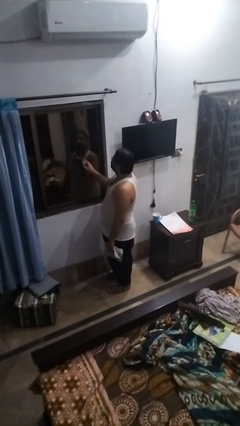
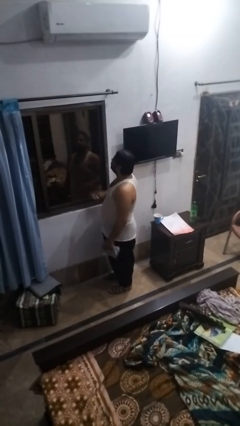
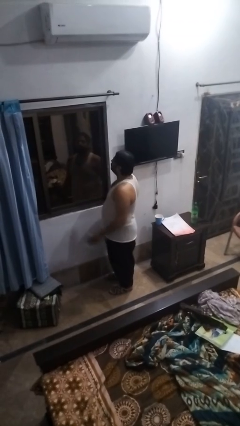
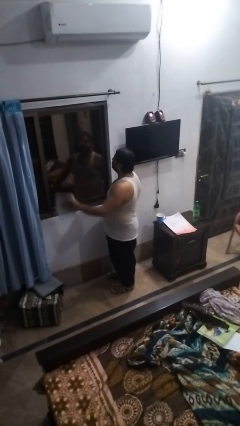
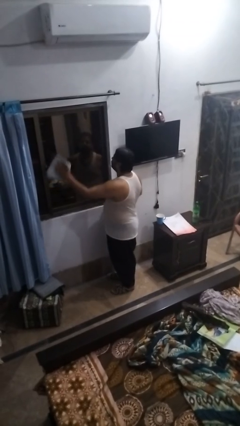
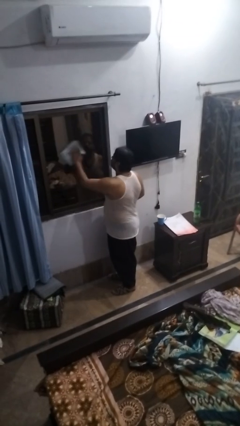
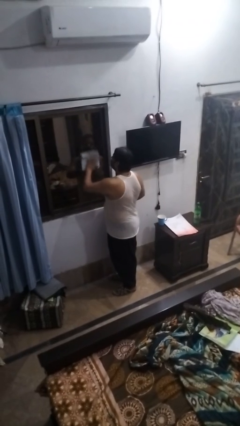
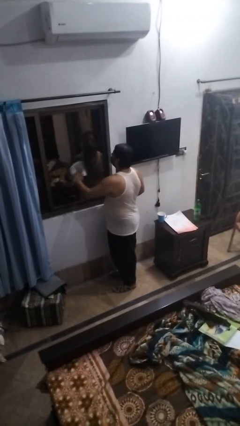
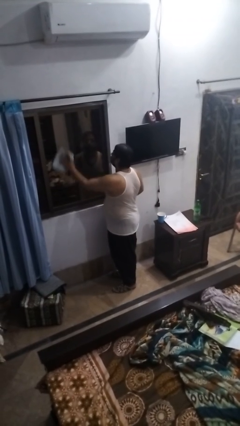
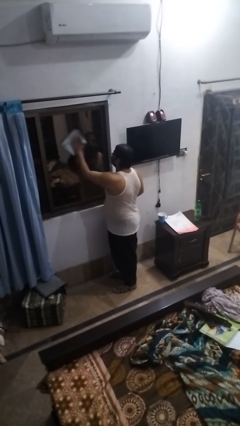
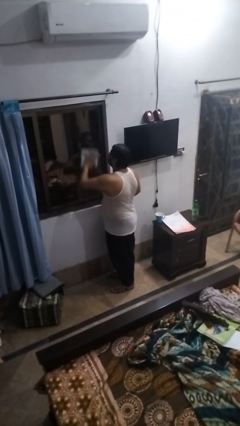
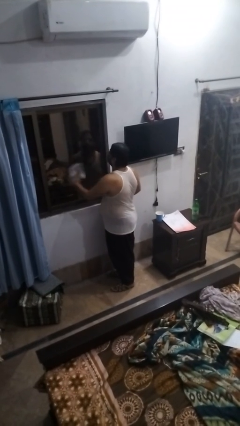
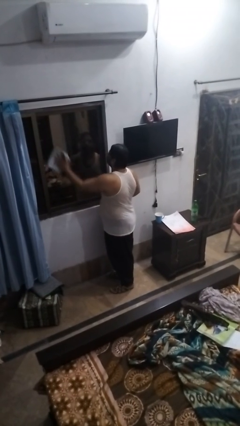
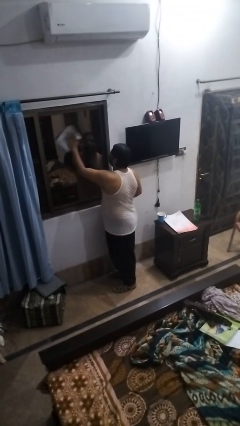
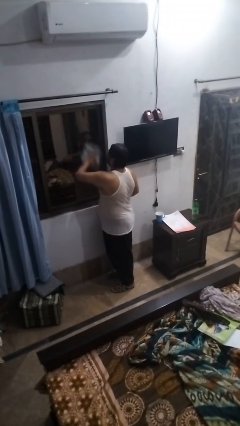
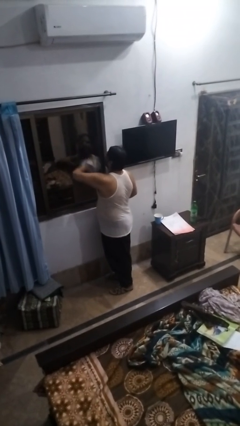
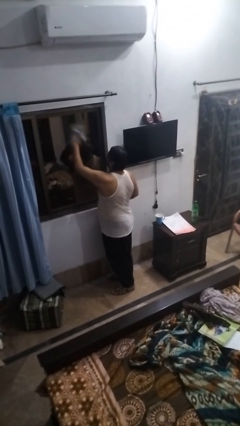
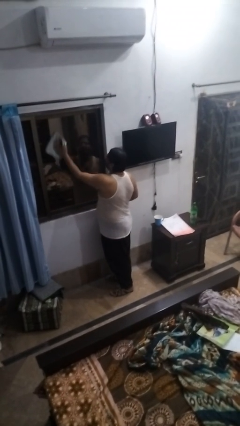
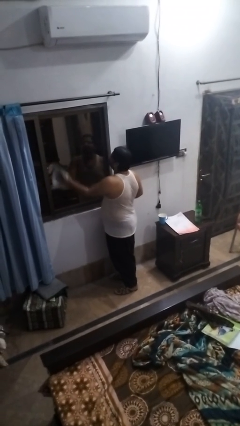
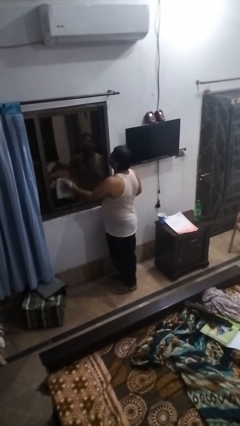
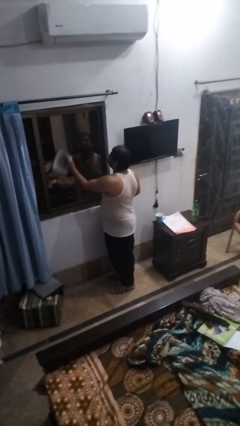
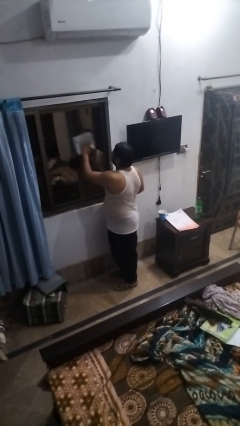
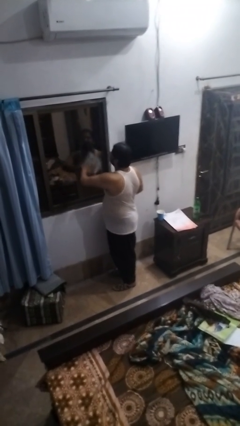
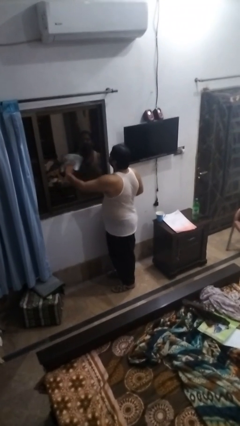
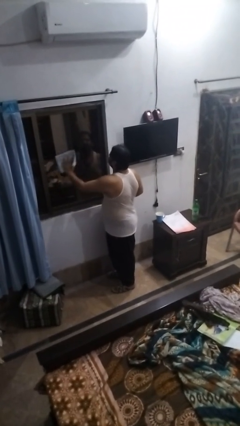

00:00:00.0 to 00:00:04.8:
person washes window

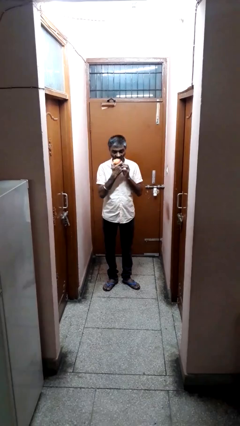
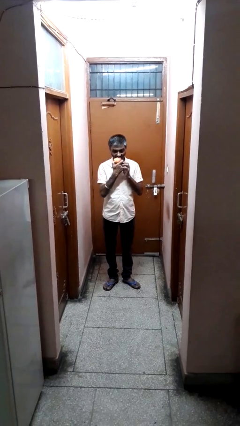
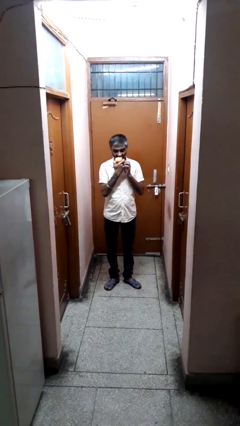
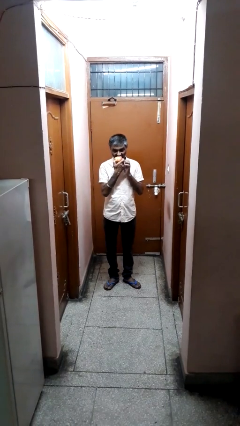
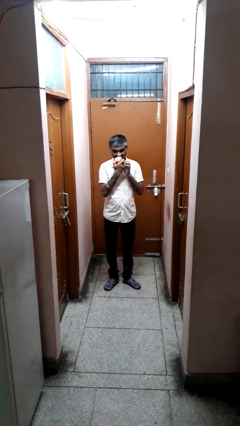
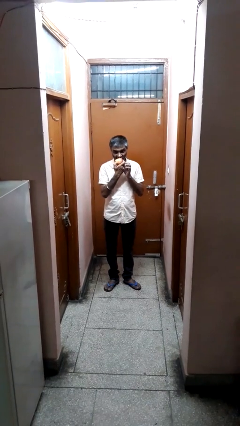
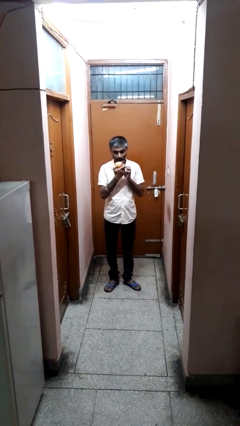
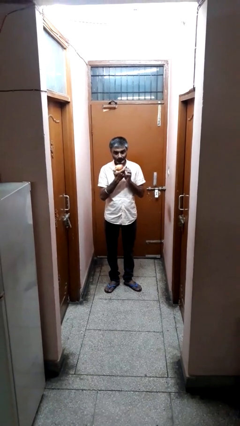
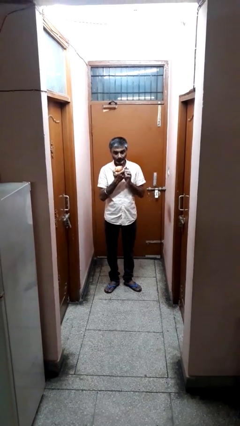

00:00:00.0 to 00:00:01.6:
person eats apple

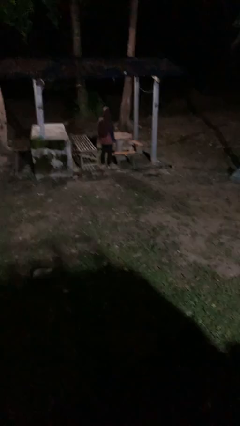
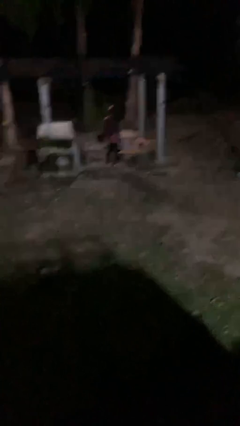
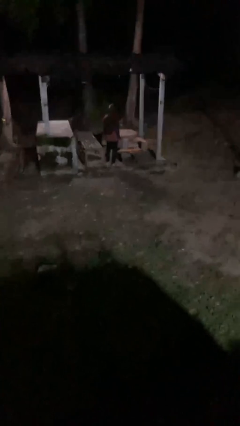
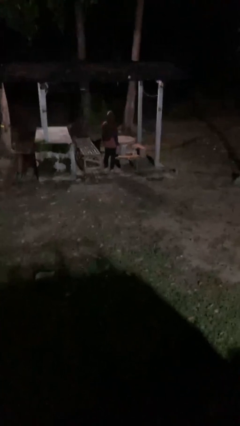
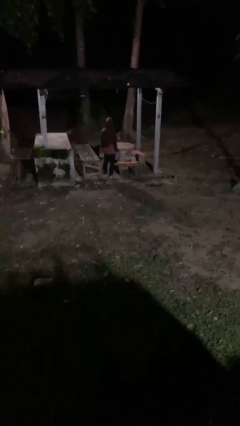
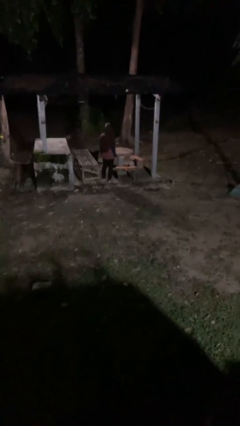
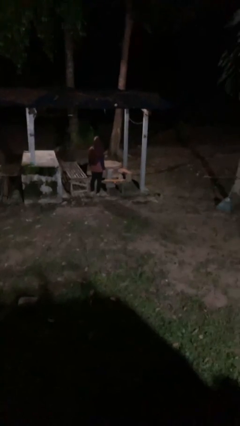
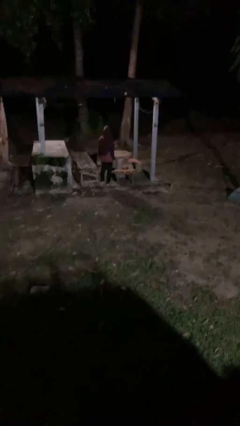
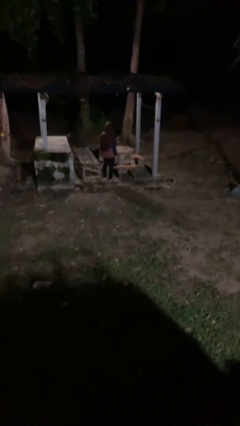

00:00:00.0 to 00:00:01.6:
person gestures arms x

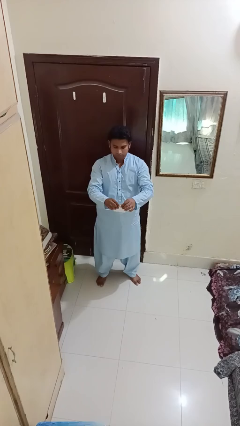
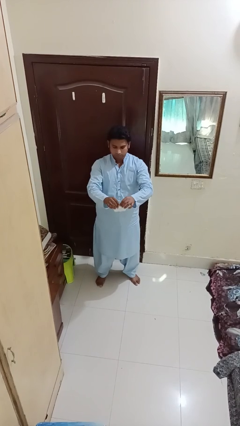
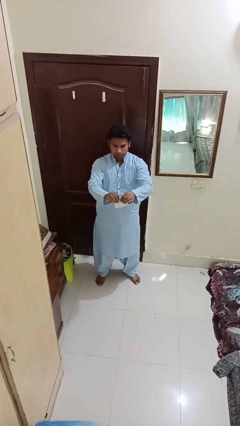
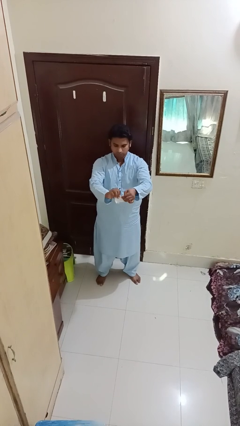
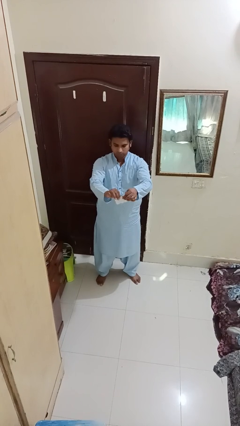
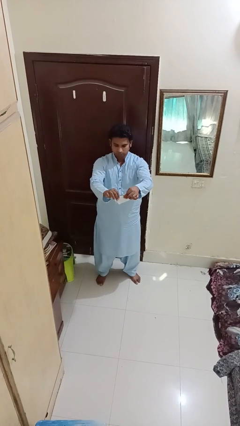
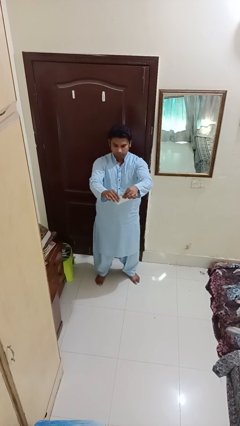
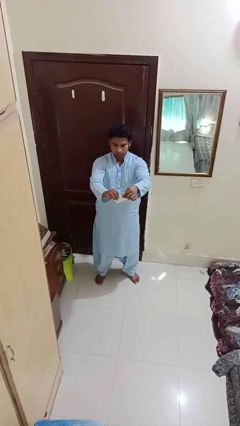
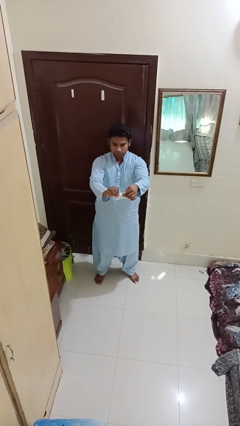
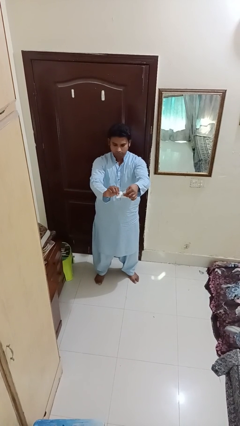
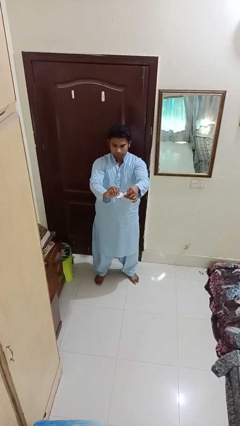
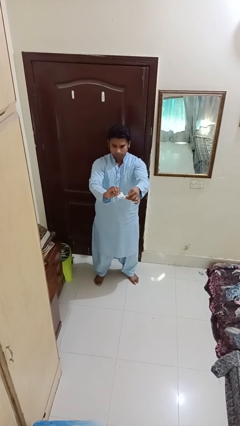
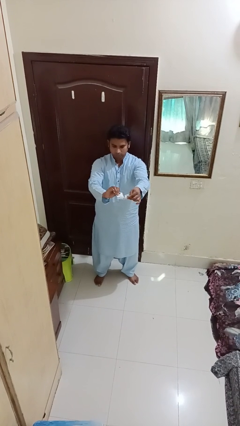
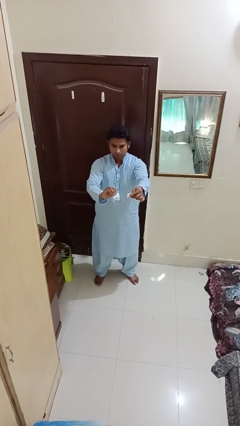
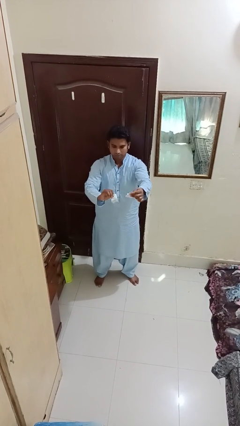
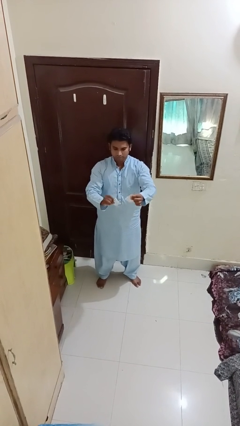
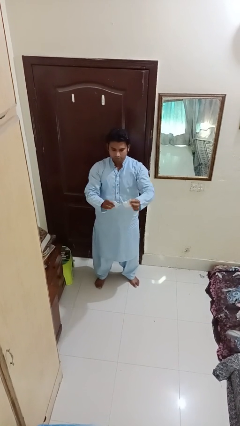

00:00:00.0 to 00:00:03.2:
person tears paper

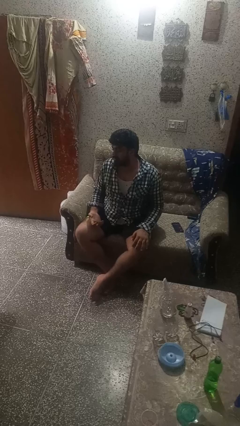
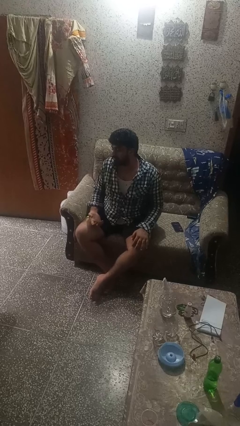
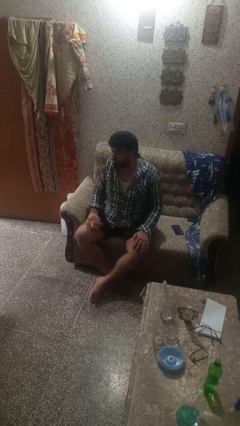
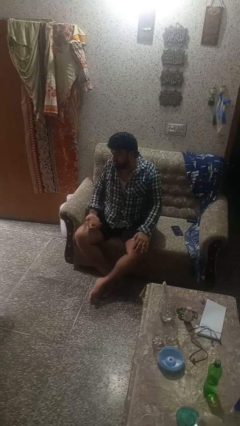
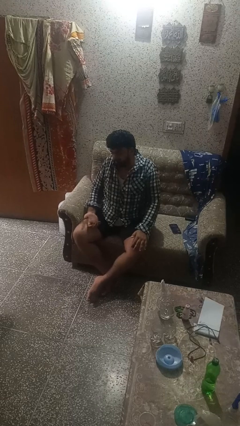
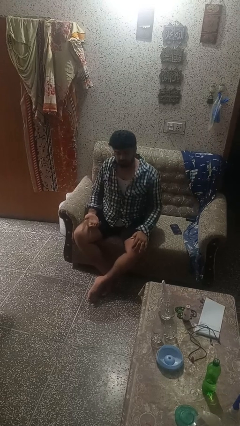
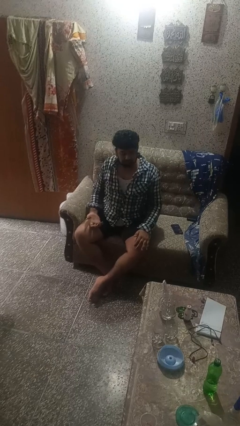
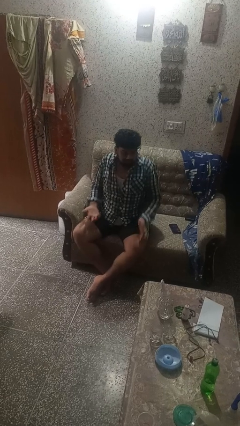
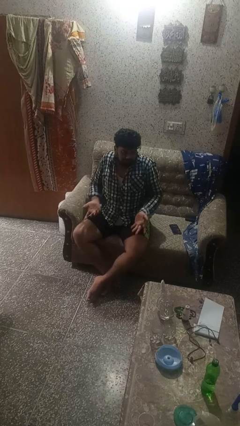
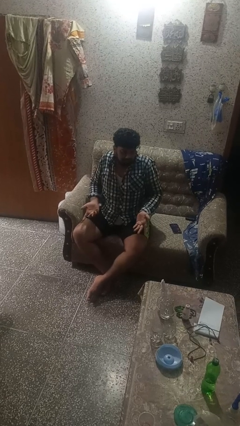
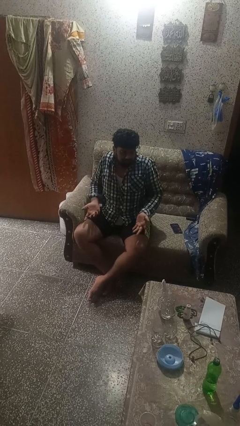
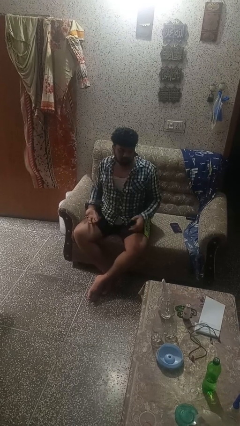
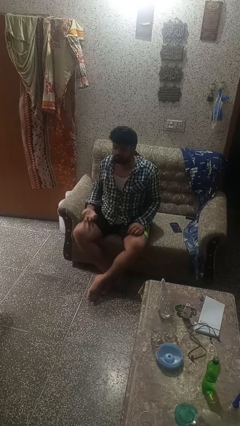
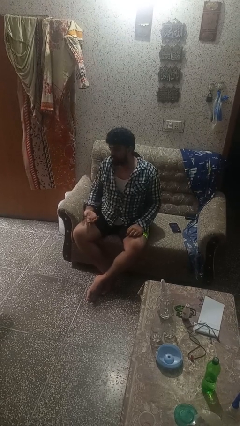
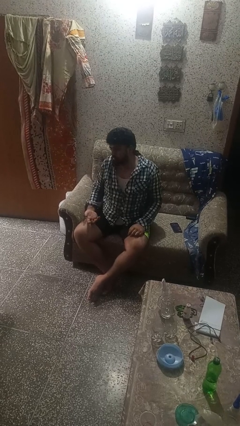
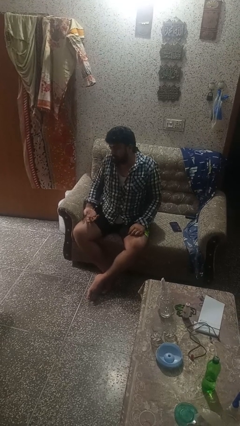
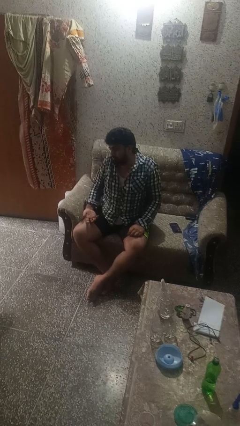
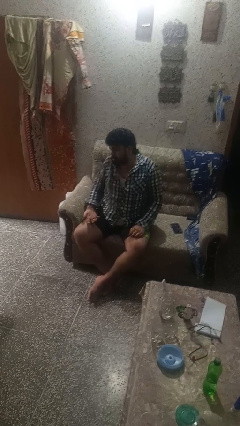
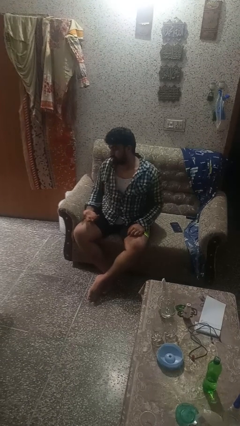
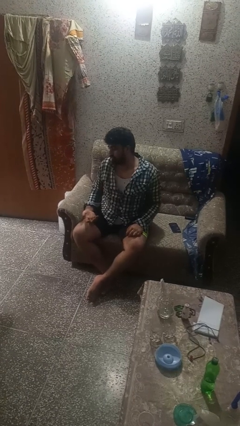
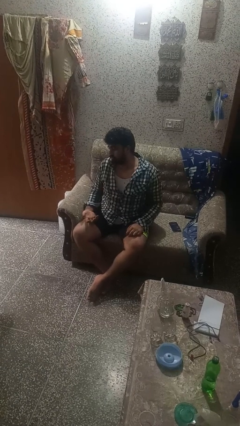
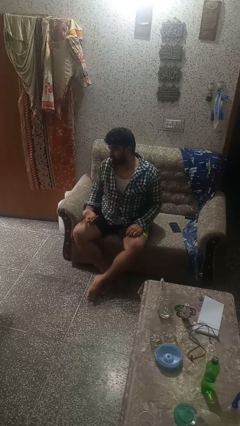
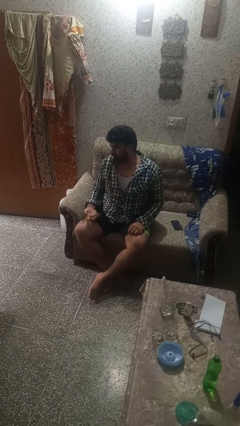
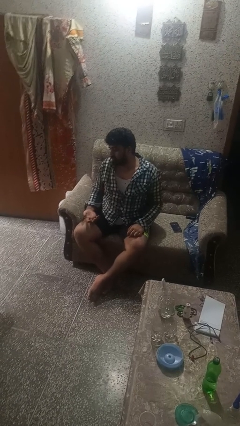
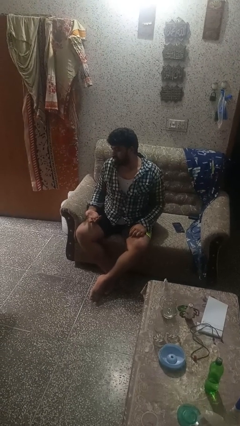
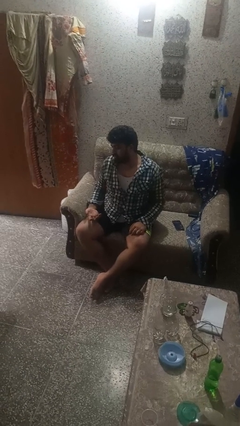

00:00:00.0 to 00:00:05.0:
person shrugs

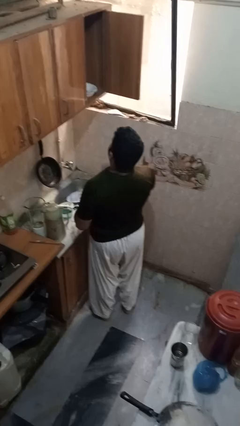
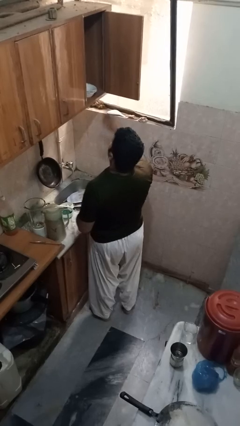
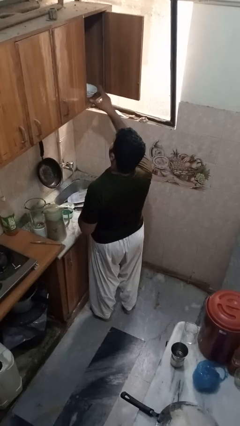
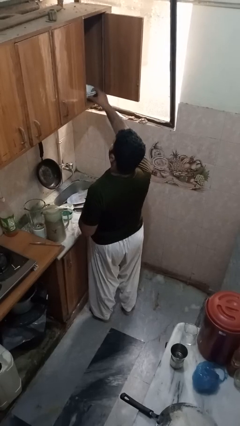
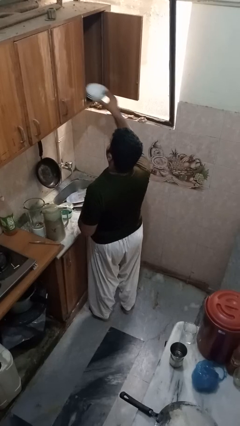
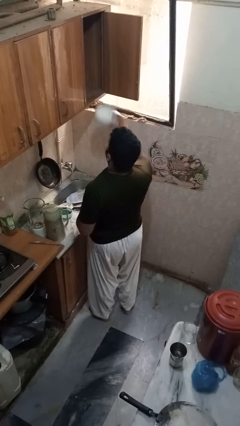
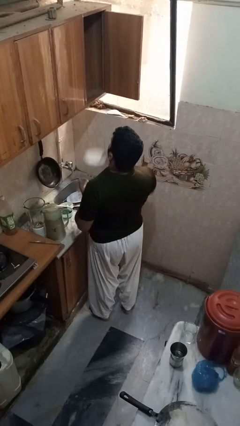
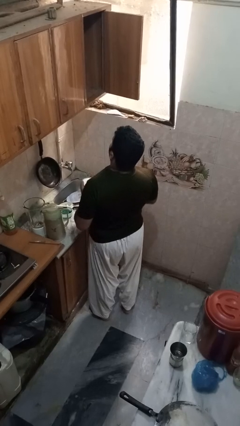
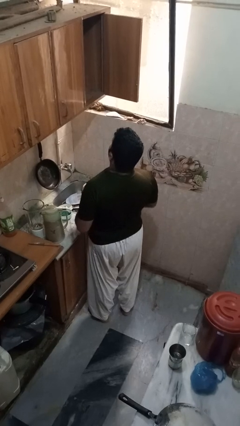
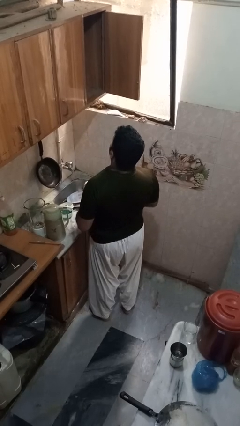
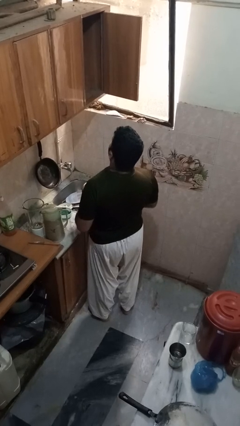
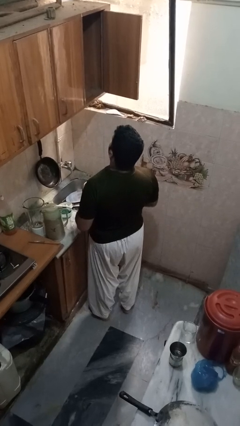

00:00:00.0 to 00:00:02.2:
person takes object from cabinet
